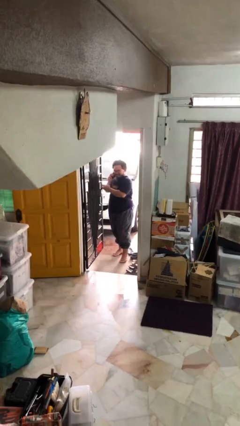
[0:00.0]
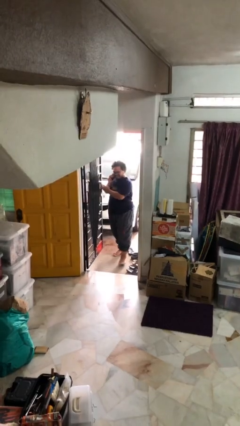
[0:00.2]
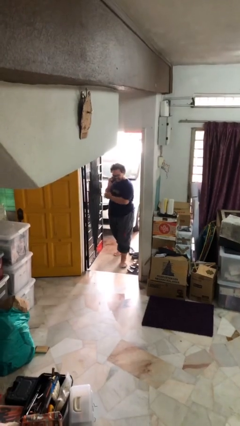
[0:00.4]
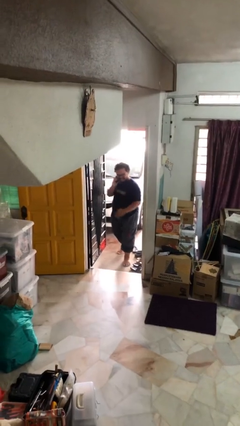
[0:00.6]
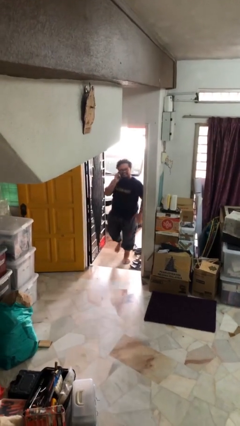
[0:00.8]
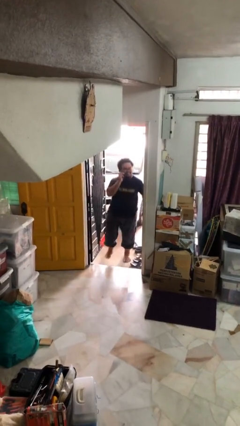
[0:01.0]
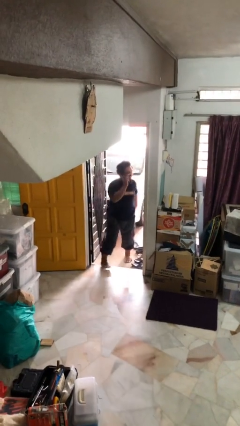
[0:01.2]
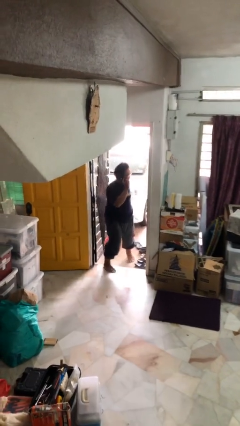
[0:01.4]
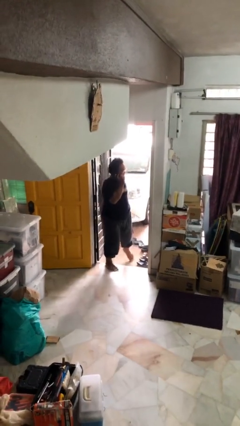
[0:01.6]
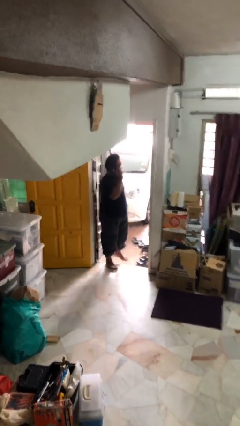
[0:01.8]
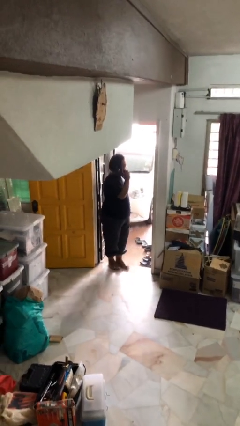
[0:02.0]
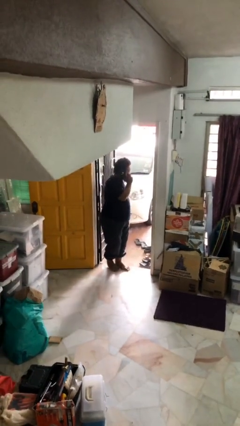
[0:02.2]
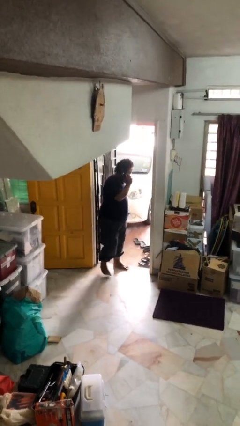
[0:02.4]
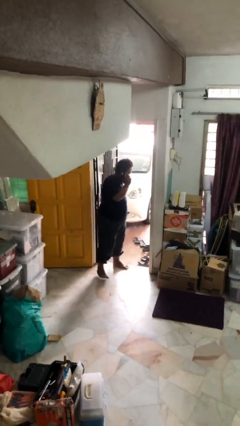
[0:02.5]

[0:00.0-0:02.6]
person enters scene through structure

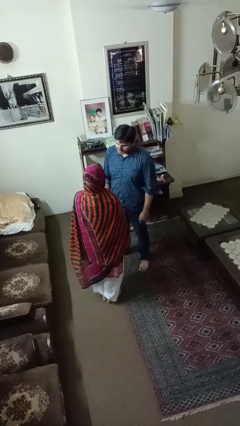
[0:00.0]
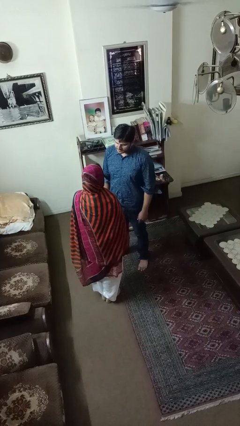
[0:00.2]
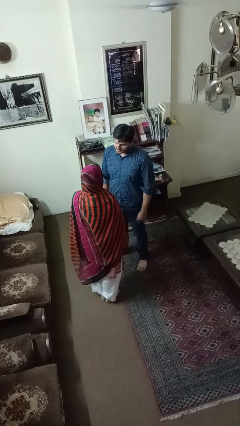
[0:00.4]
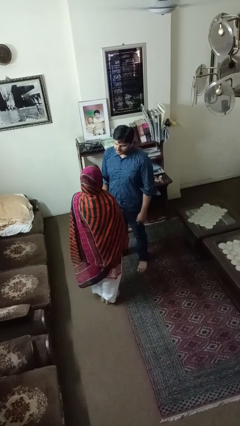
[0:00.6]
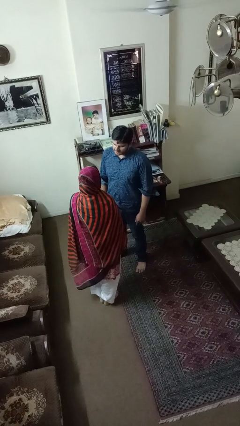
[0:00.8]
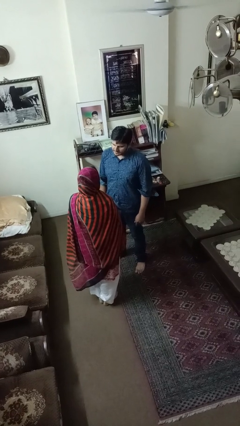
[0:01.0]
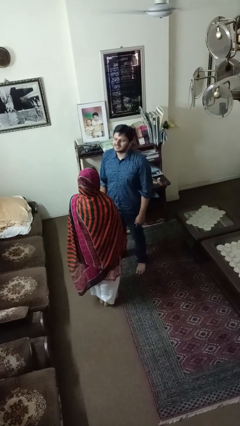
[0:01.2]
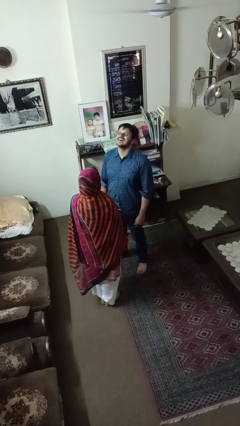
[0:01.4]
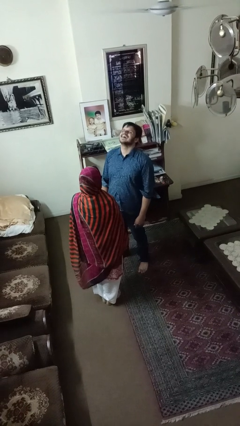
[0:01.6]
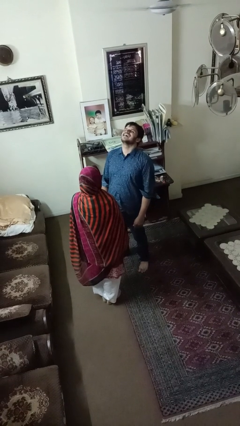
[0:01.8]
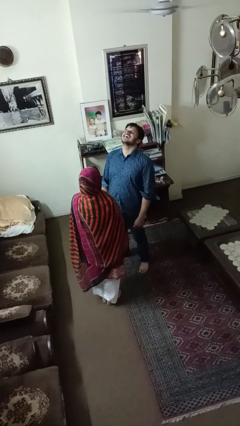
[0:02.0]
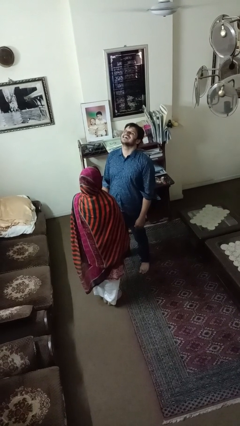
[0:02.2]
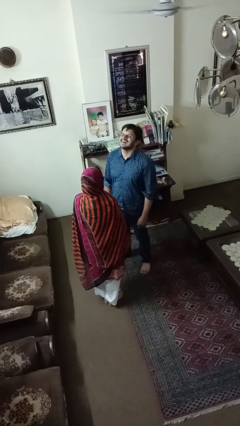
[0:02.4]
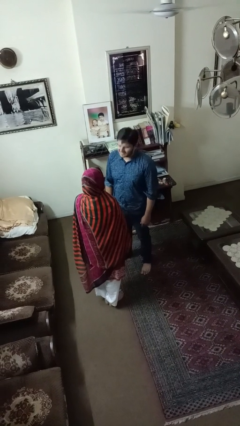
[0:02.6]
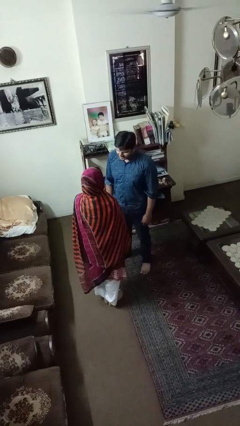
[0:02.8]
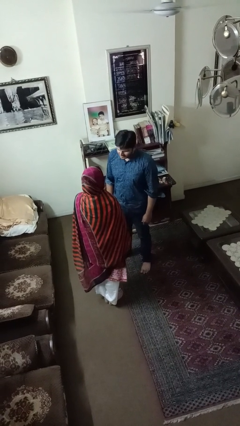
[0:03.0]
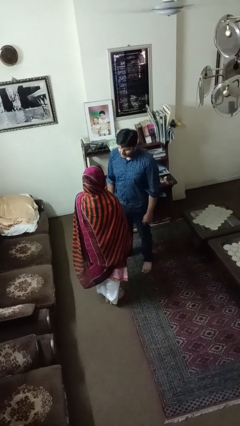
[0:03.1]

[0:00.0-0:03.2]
person laughs with person

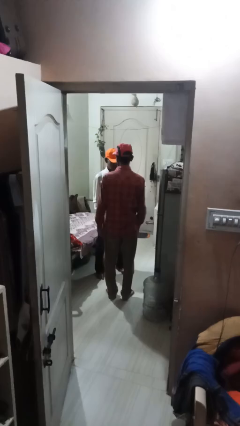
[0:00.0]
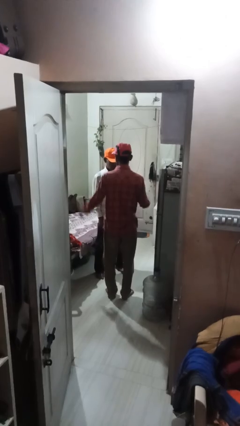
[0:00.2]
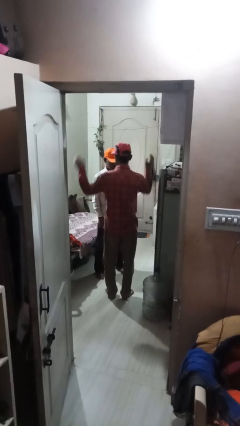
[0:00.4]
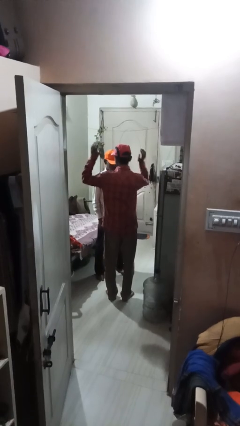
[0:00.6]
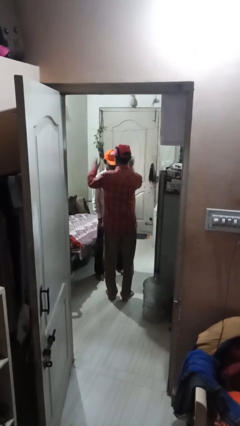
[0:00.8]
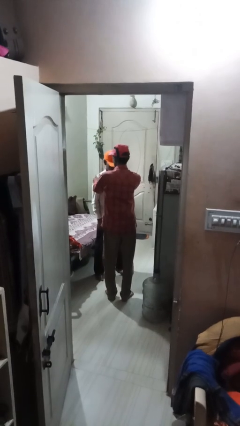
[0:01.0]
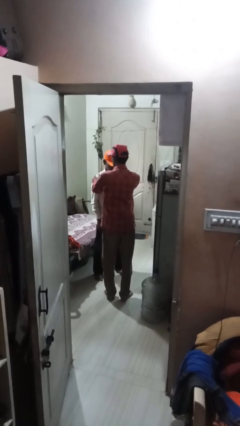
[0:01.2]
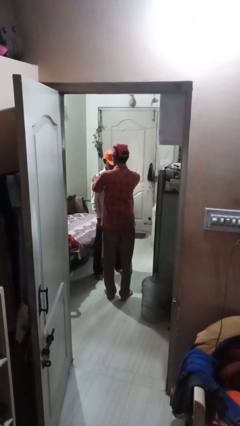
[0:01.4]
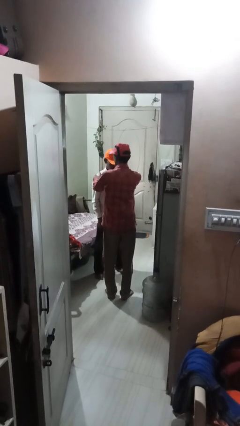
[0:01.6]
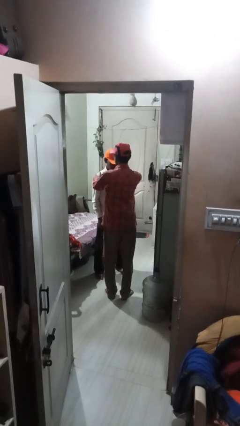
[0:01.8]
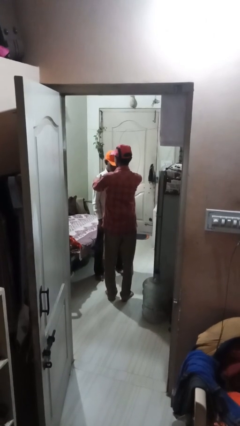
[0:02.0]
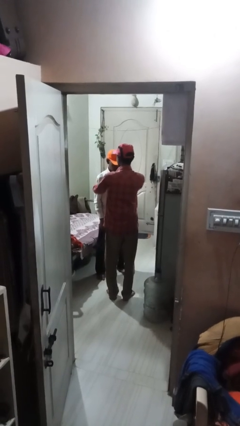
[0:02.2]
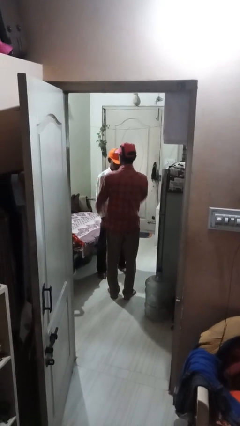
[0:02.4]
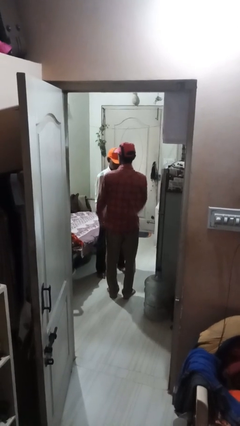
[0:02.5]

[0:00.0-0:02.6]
person pounds shoulders of person

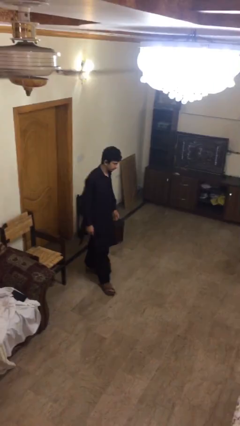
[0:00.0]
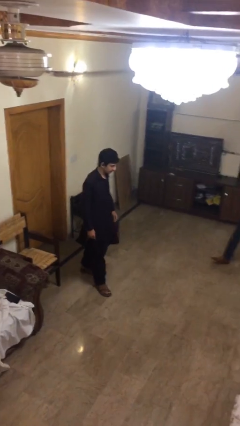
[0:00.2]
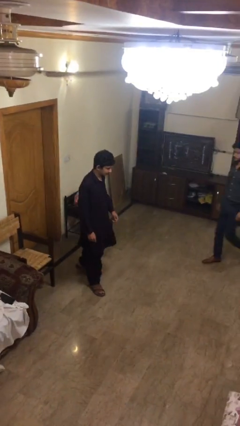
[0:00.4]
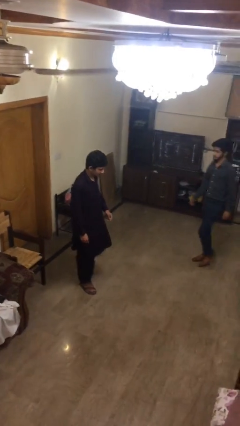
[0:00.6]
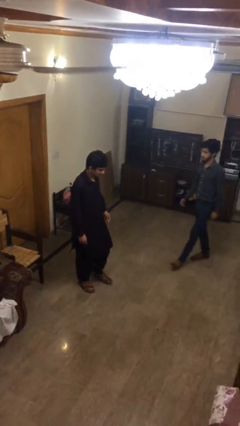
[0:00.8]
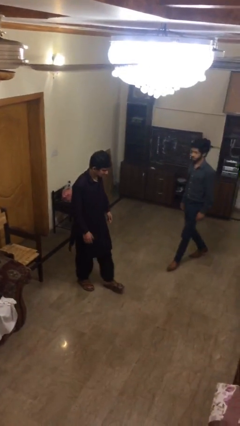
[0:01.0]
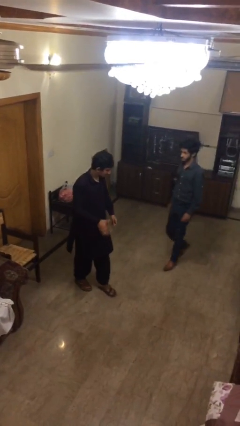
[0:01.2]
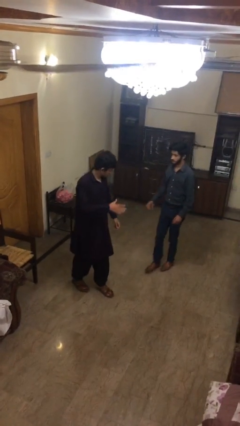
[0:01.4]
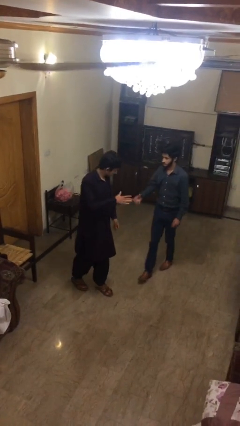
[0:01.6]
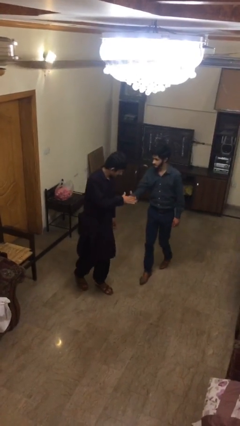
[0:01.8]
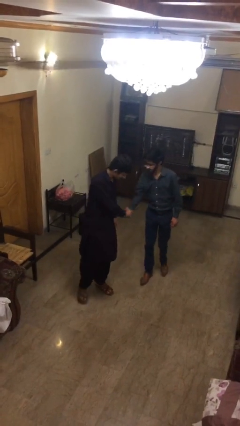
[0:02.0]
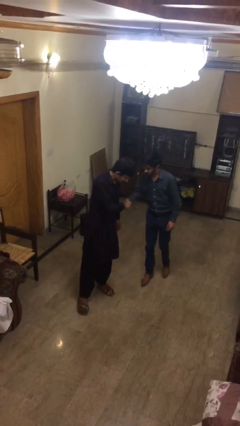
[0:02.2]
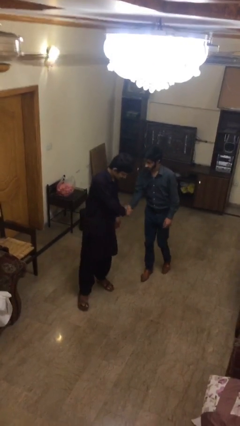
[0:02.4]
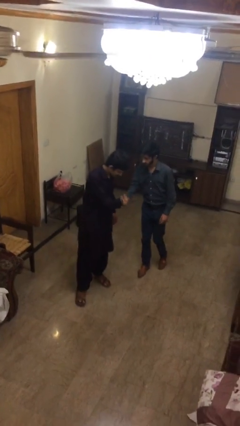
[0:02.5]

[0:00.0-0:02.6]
person shakes hand

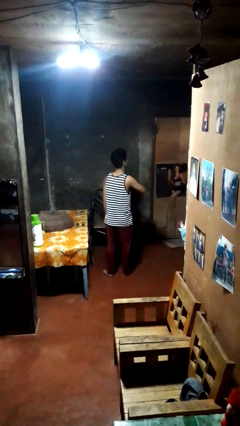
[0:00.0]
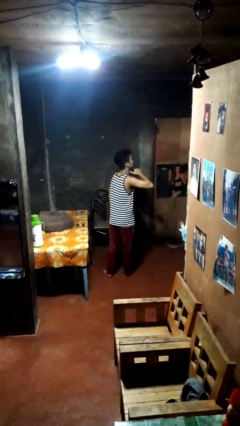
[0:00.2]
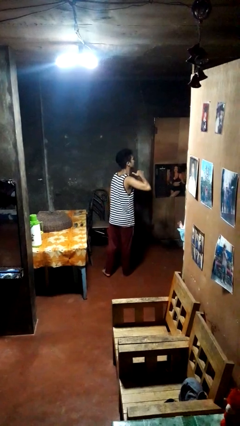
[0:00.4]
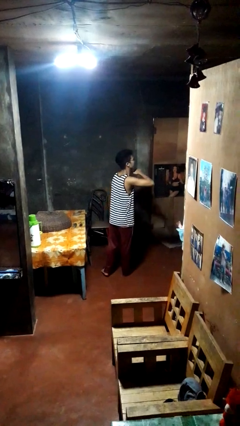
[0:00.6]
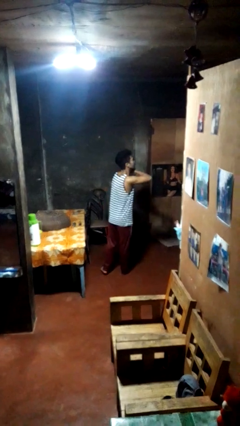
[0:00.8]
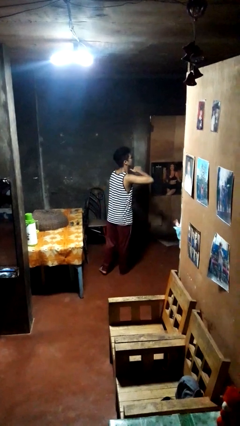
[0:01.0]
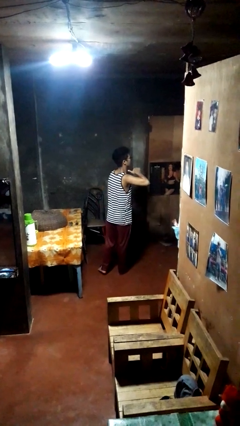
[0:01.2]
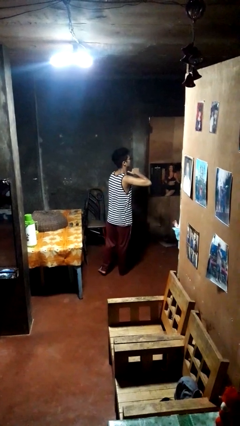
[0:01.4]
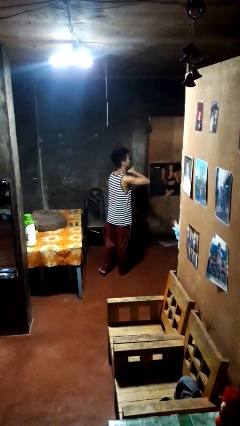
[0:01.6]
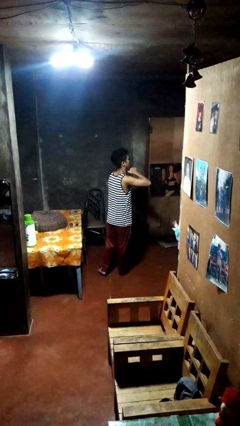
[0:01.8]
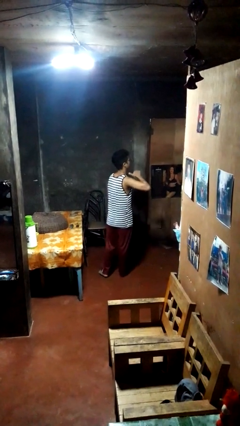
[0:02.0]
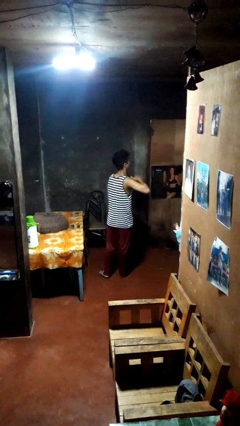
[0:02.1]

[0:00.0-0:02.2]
person gestures cut

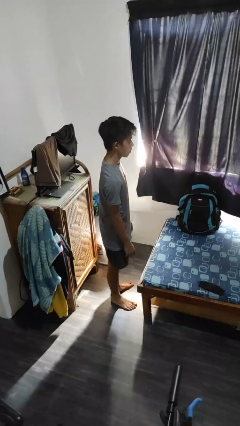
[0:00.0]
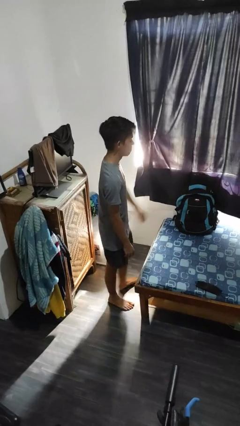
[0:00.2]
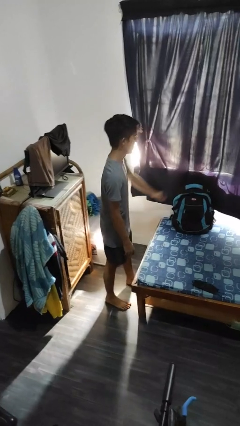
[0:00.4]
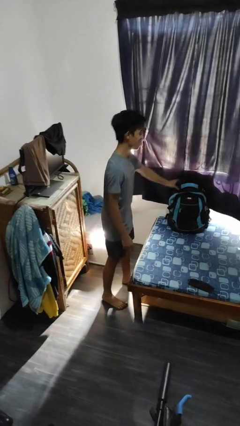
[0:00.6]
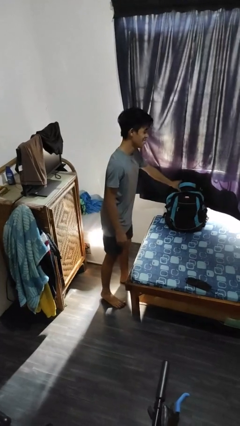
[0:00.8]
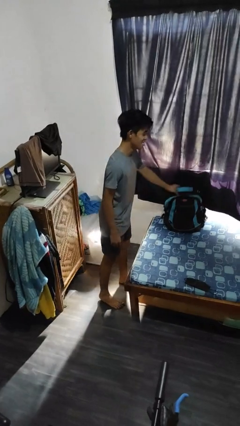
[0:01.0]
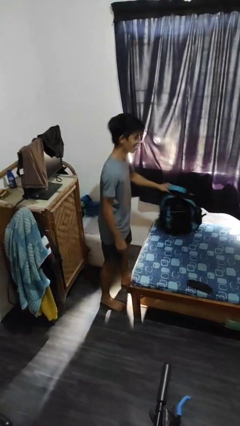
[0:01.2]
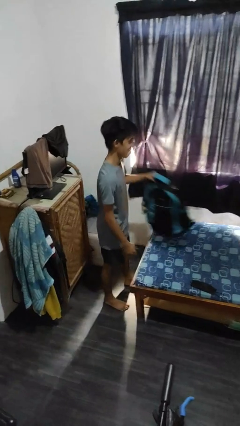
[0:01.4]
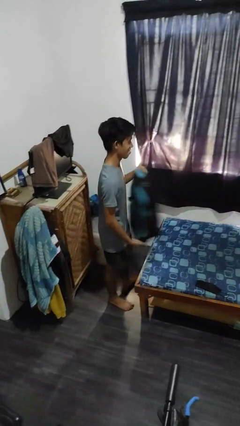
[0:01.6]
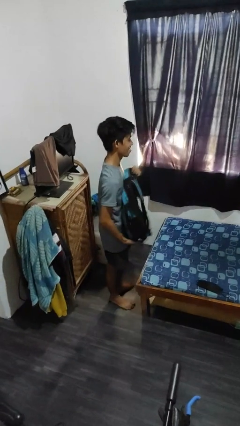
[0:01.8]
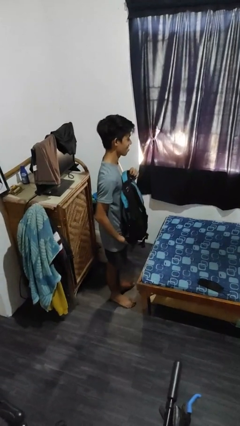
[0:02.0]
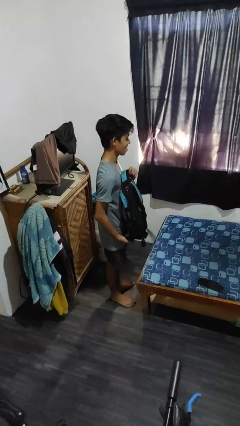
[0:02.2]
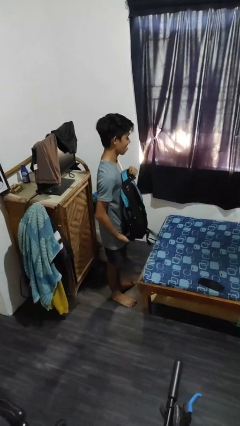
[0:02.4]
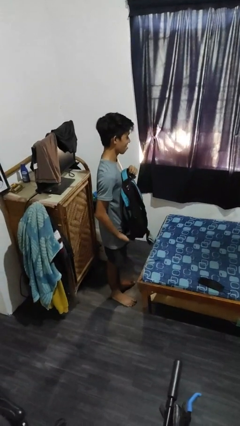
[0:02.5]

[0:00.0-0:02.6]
person picks up object from bed

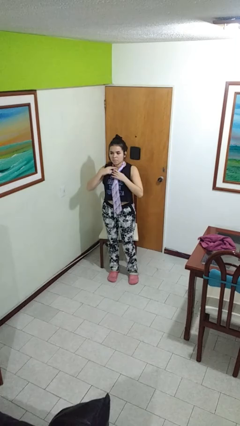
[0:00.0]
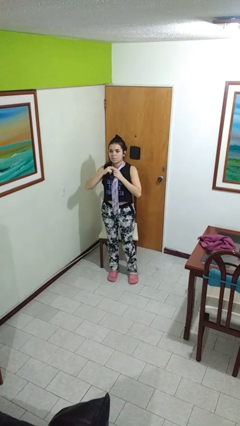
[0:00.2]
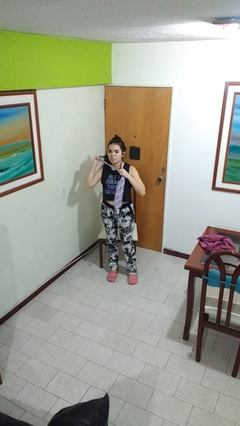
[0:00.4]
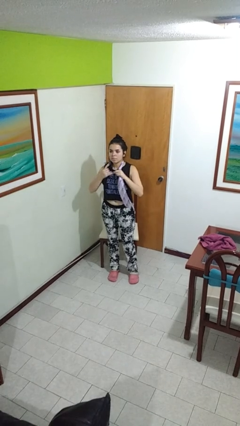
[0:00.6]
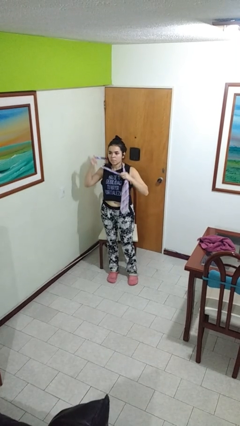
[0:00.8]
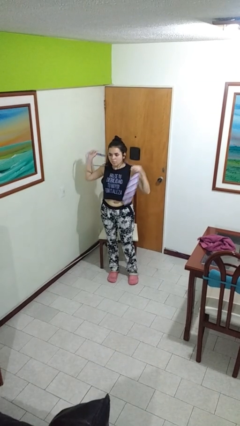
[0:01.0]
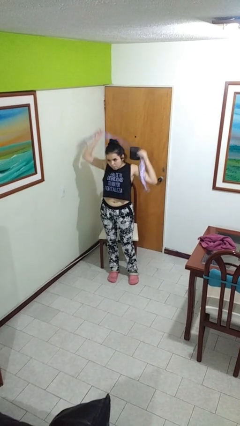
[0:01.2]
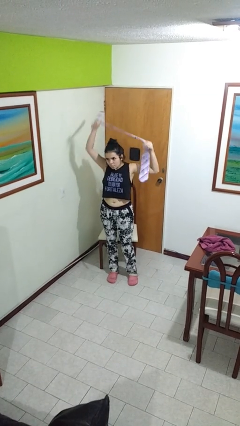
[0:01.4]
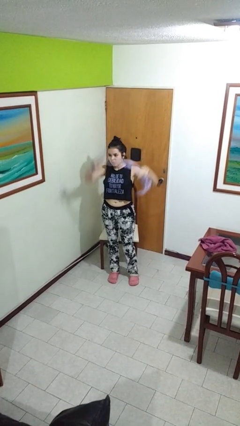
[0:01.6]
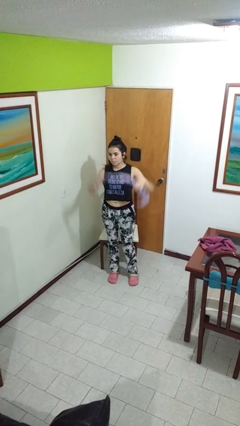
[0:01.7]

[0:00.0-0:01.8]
person takes off necktie
